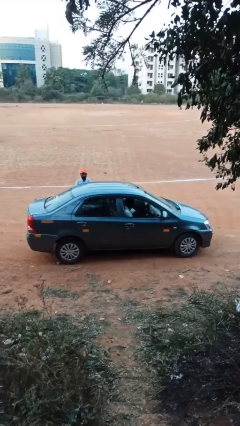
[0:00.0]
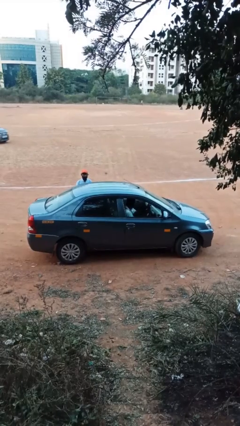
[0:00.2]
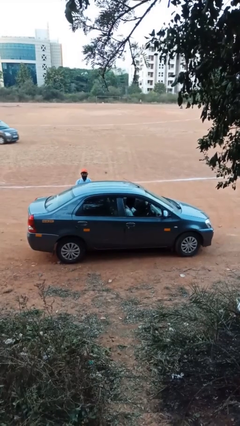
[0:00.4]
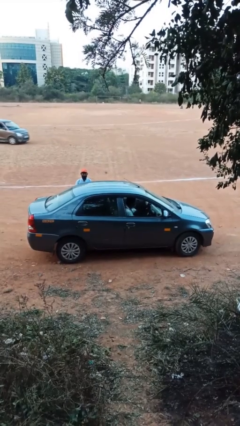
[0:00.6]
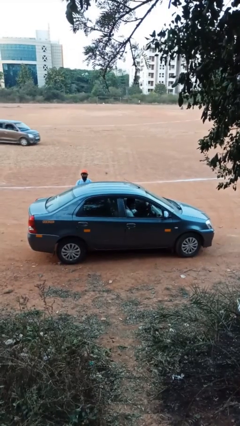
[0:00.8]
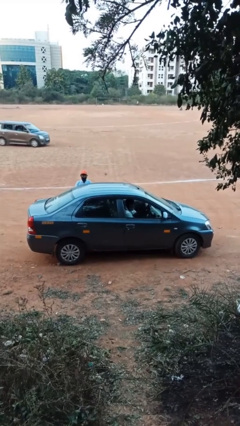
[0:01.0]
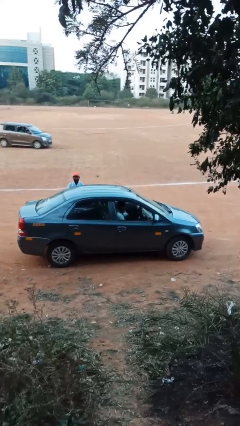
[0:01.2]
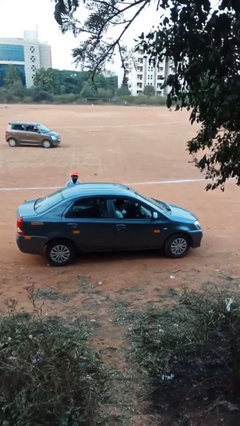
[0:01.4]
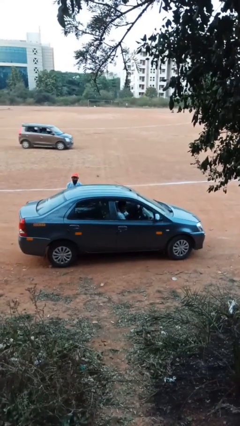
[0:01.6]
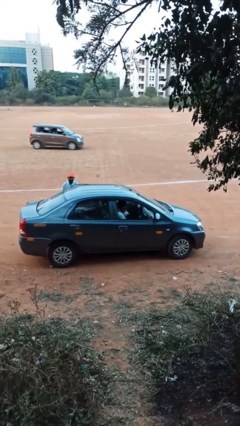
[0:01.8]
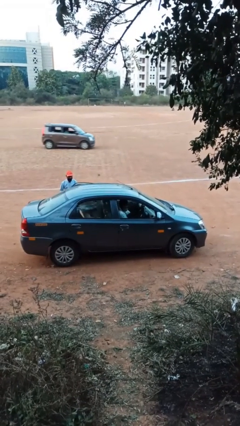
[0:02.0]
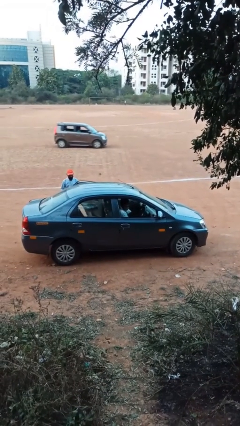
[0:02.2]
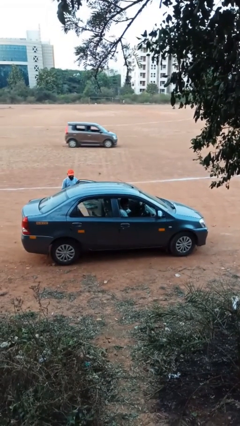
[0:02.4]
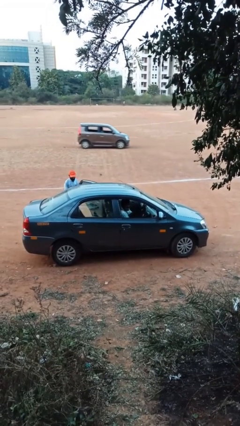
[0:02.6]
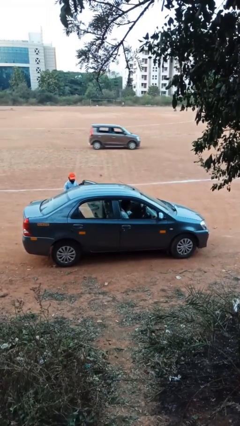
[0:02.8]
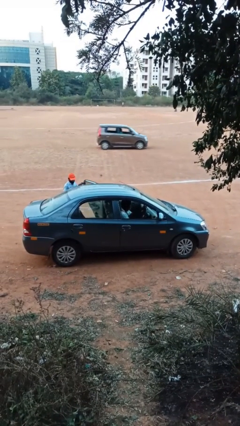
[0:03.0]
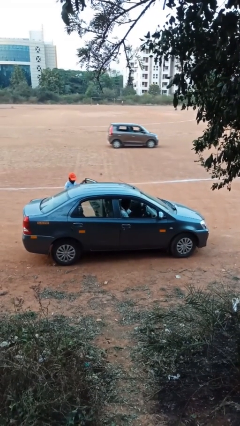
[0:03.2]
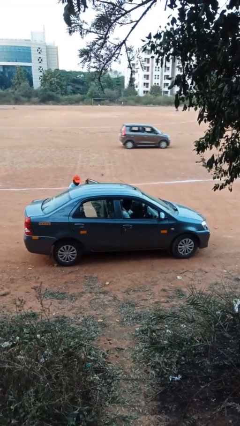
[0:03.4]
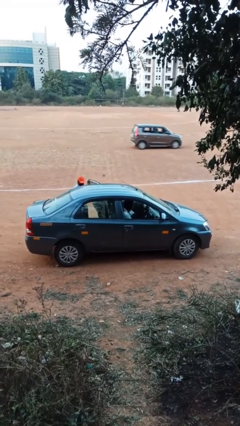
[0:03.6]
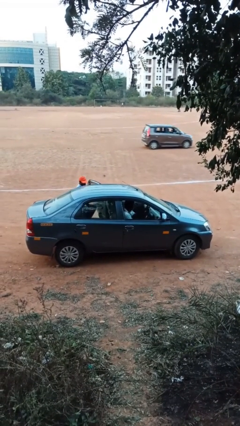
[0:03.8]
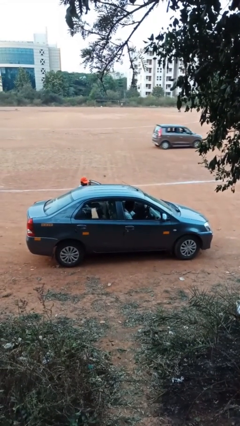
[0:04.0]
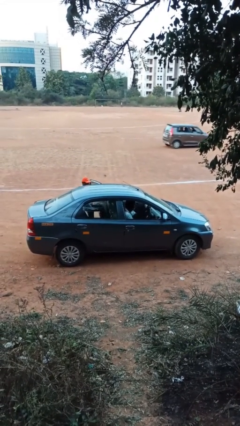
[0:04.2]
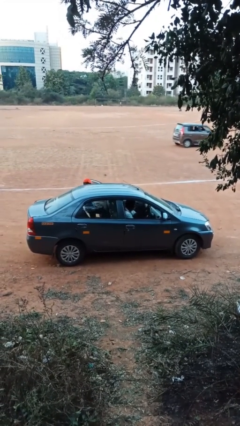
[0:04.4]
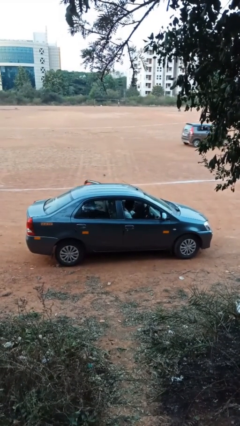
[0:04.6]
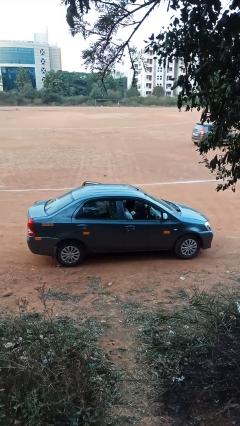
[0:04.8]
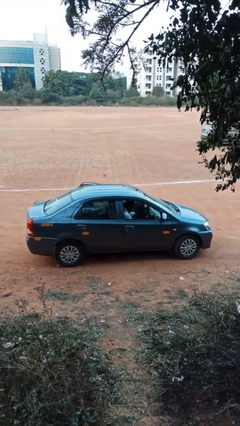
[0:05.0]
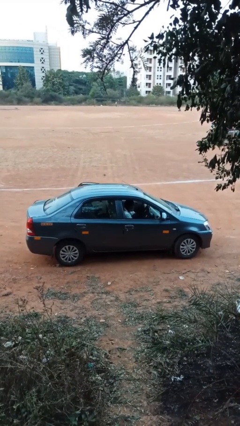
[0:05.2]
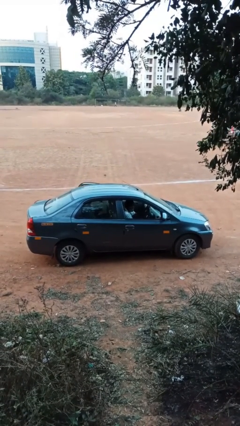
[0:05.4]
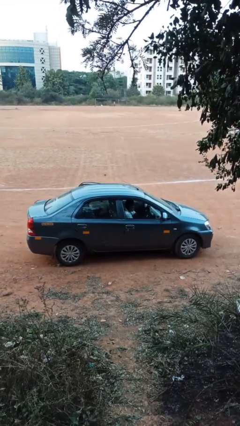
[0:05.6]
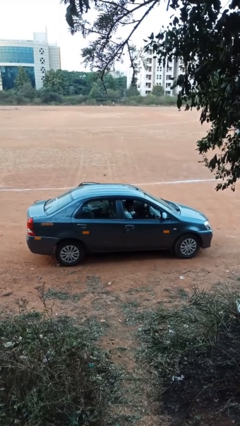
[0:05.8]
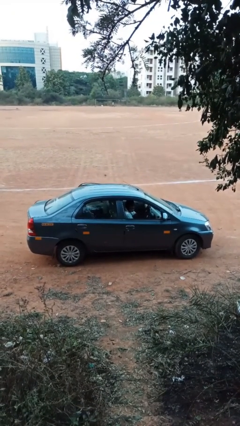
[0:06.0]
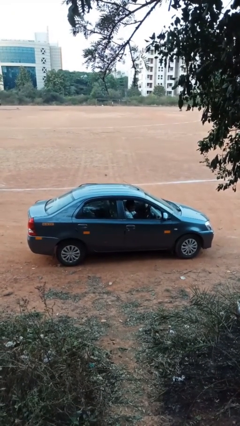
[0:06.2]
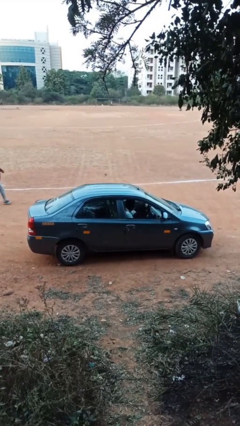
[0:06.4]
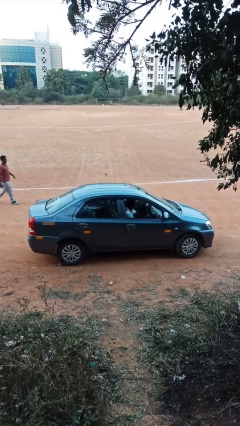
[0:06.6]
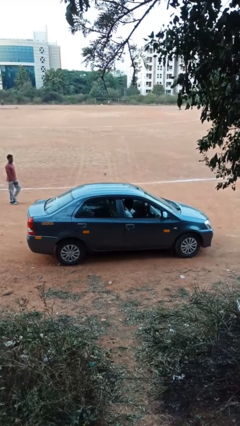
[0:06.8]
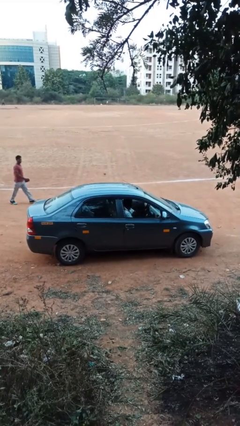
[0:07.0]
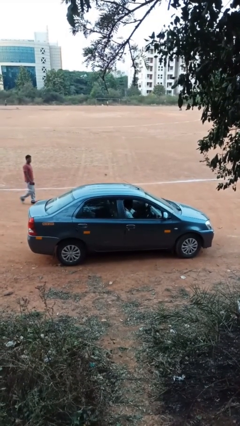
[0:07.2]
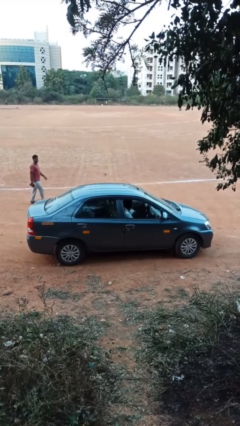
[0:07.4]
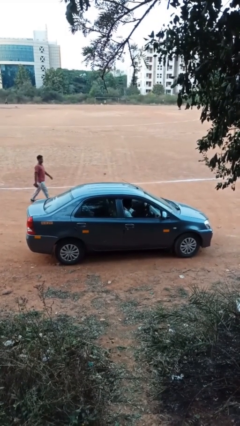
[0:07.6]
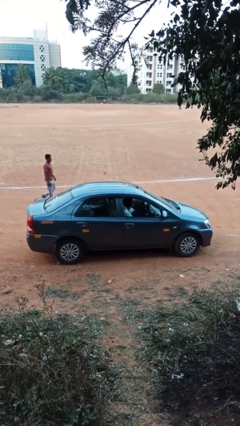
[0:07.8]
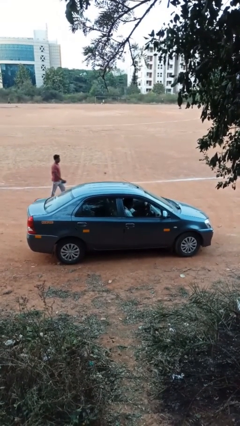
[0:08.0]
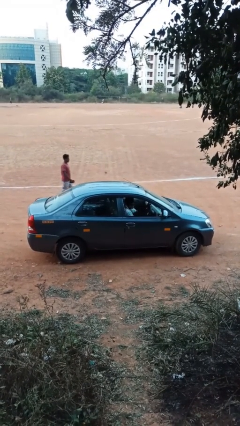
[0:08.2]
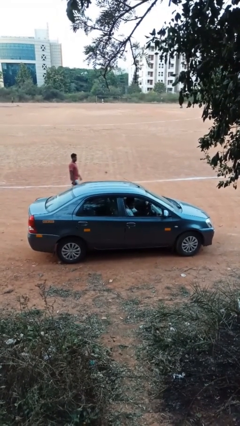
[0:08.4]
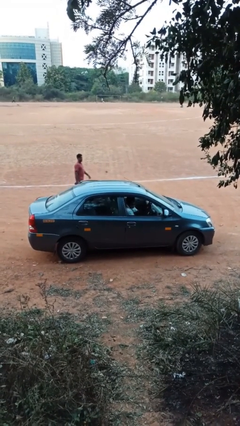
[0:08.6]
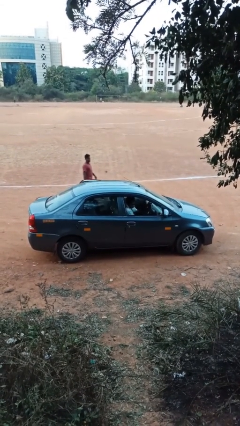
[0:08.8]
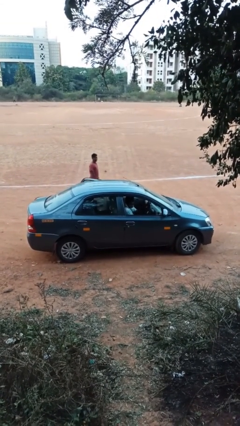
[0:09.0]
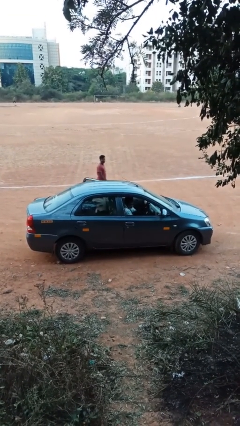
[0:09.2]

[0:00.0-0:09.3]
car picks up person

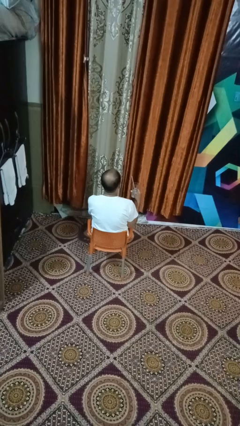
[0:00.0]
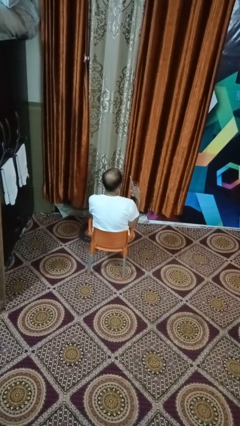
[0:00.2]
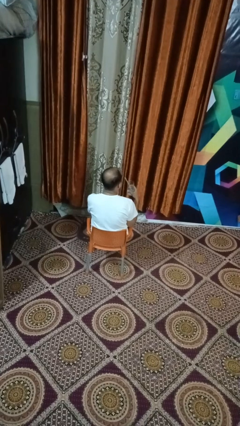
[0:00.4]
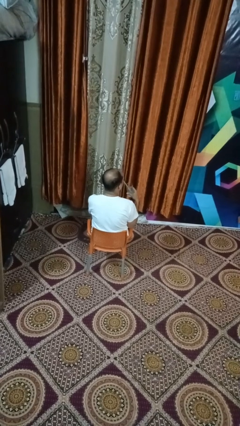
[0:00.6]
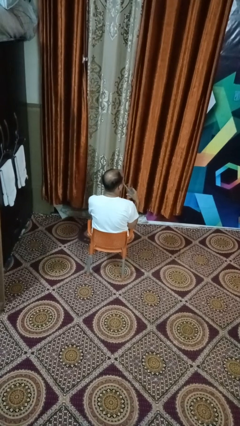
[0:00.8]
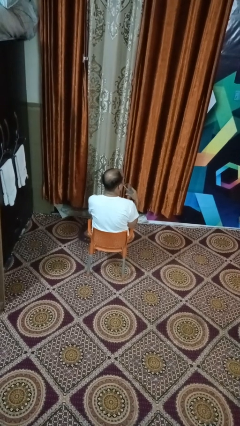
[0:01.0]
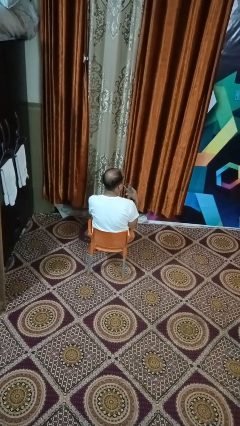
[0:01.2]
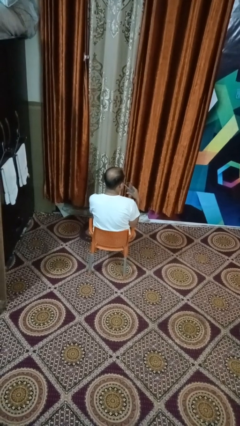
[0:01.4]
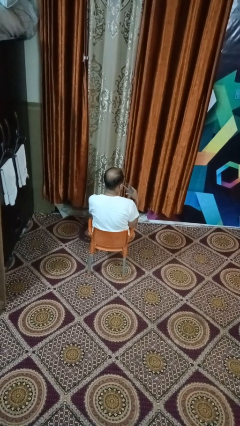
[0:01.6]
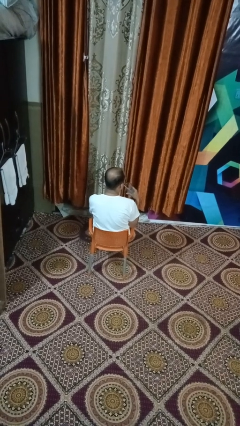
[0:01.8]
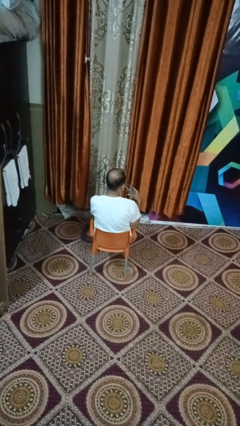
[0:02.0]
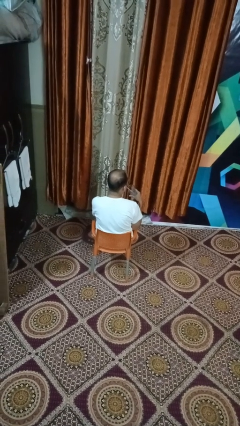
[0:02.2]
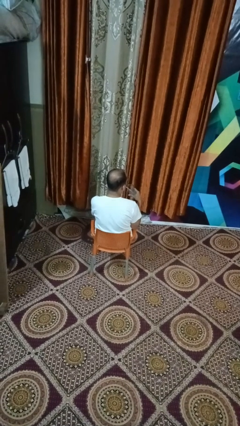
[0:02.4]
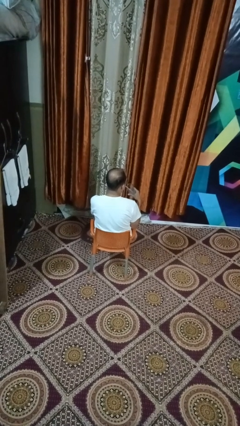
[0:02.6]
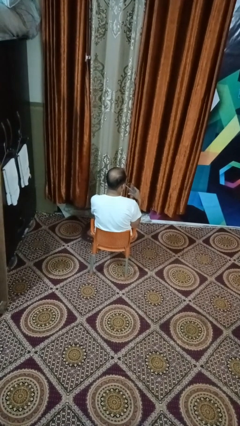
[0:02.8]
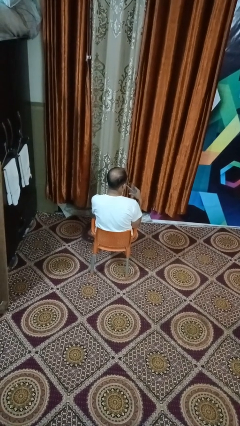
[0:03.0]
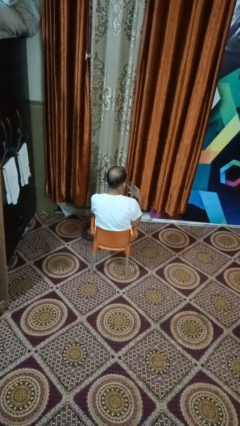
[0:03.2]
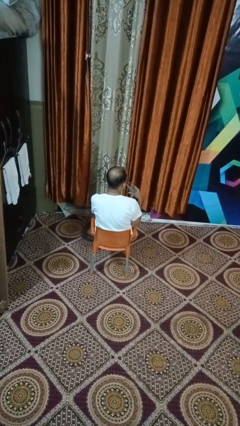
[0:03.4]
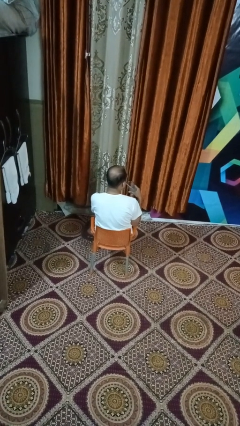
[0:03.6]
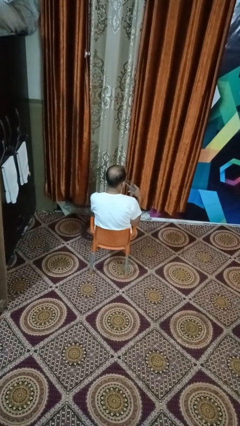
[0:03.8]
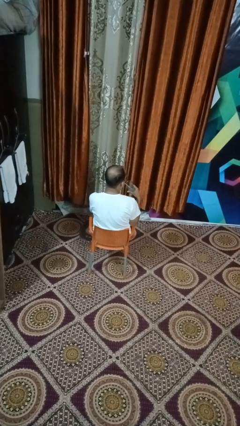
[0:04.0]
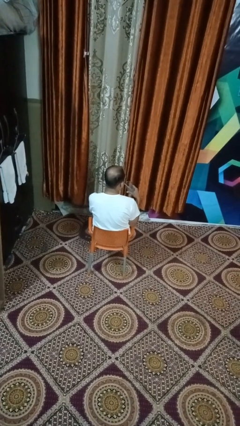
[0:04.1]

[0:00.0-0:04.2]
person drinks from straw

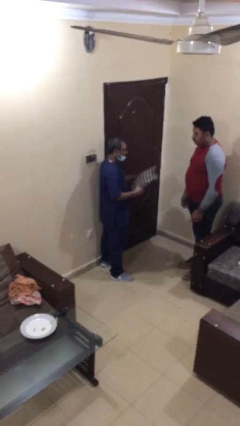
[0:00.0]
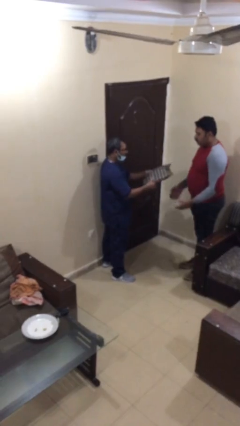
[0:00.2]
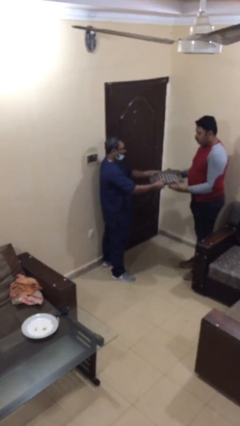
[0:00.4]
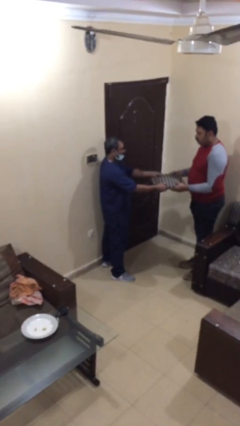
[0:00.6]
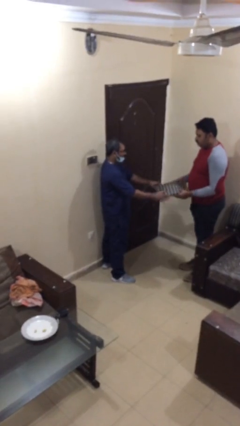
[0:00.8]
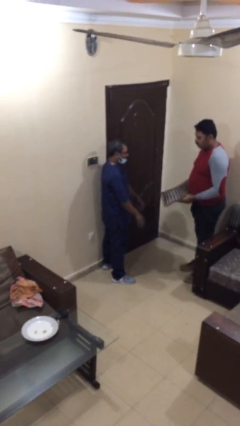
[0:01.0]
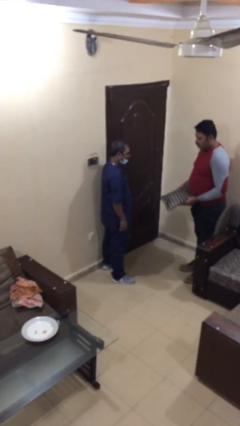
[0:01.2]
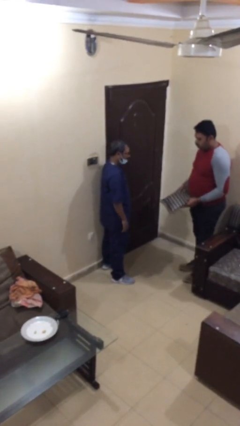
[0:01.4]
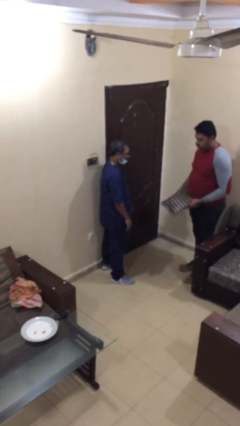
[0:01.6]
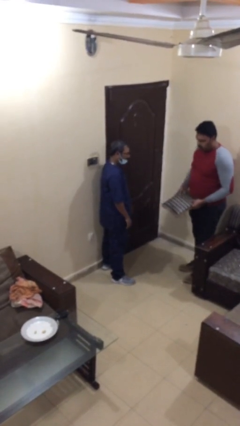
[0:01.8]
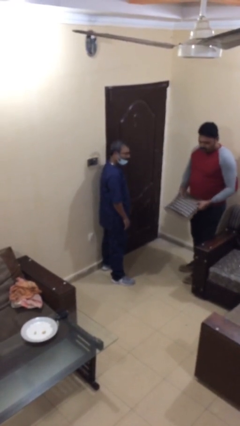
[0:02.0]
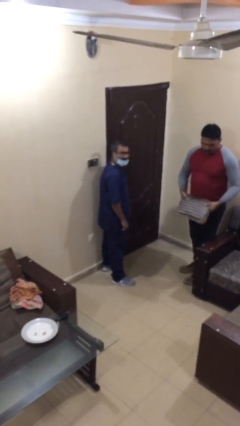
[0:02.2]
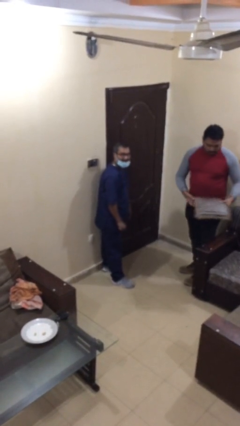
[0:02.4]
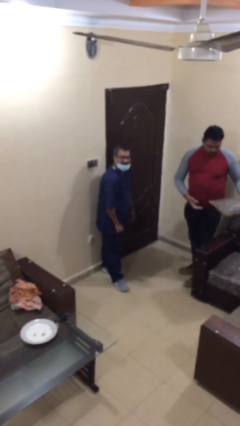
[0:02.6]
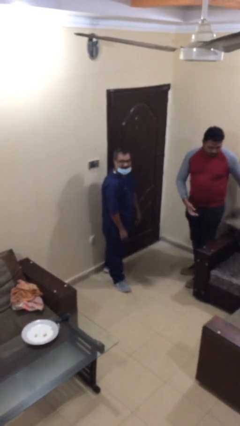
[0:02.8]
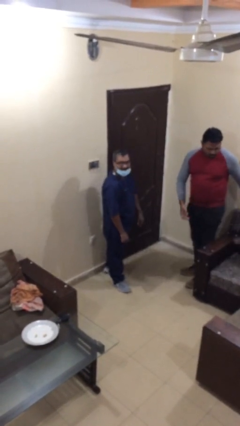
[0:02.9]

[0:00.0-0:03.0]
person transfers object to person

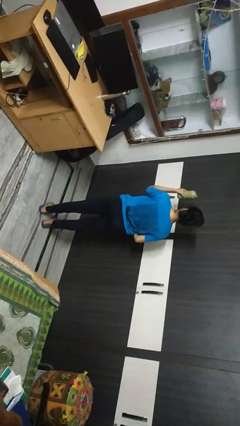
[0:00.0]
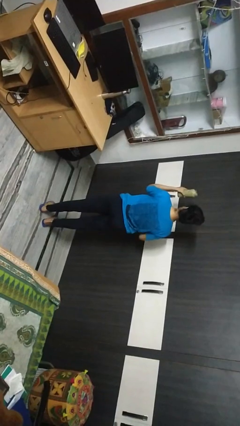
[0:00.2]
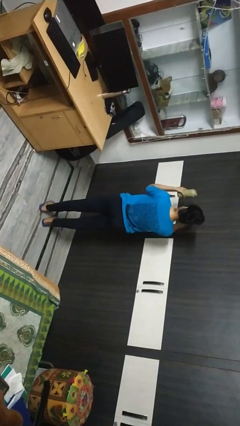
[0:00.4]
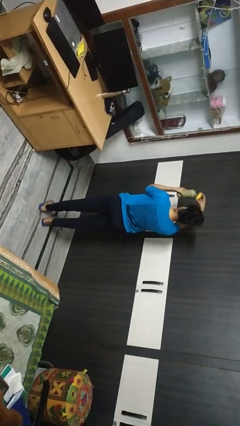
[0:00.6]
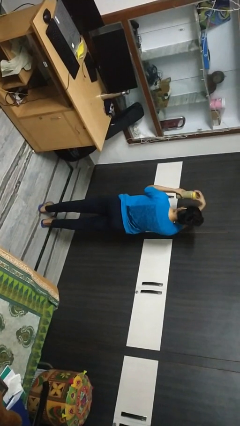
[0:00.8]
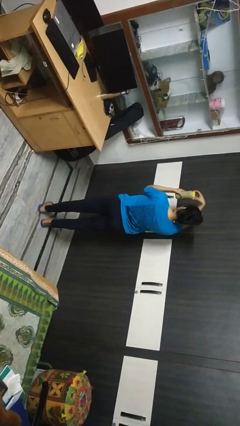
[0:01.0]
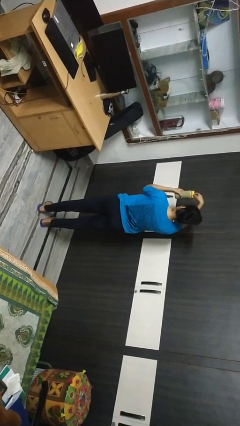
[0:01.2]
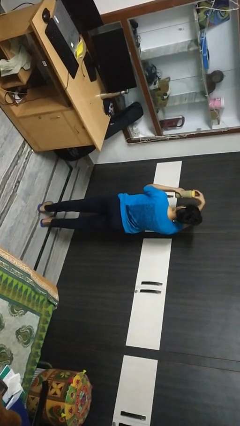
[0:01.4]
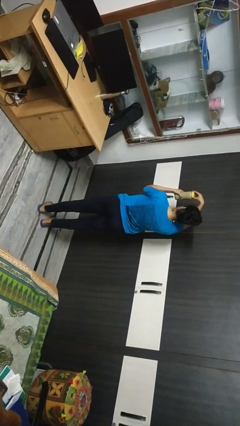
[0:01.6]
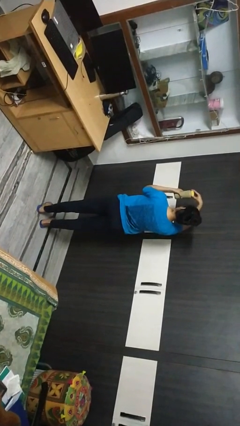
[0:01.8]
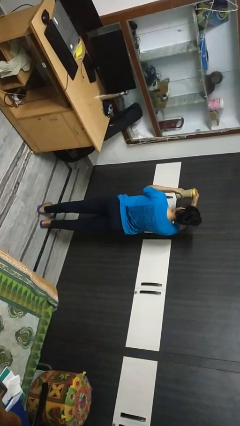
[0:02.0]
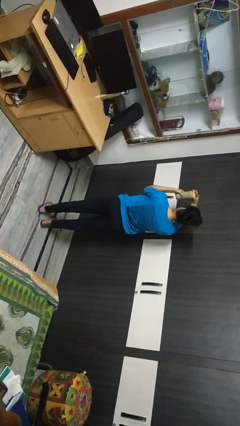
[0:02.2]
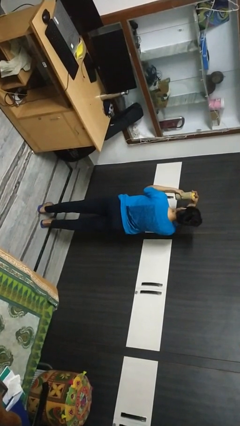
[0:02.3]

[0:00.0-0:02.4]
person closes jar
